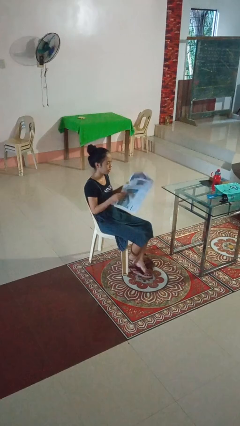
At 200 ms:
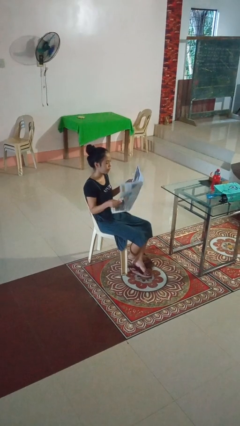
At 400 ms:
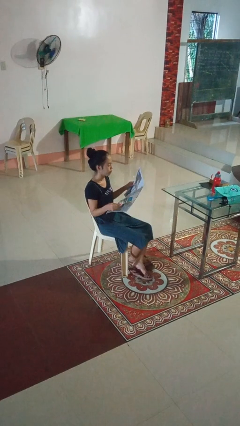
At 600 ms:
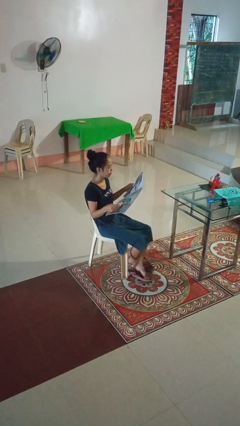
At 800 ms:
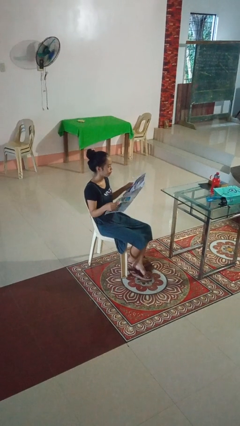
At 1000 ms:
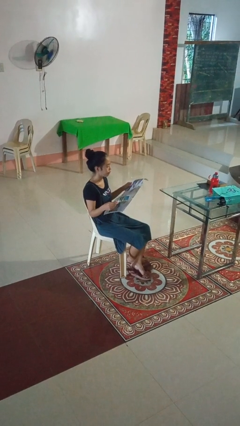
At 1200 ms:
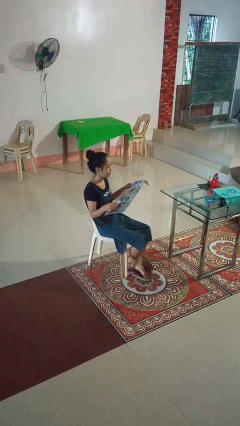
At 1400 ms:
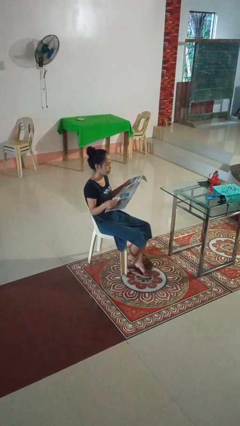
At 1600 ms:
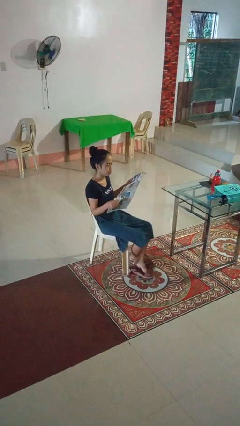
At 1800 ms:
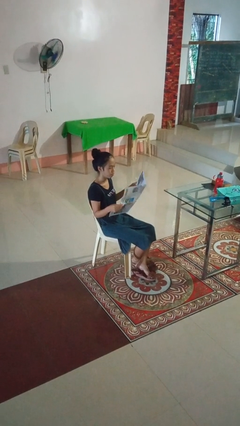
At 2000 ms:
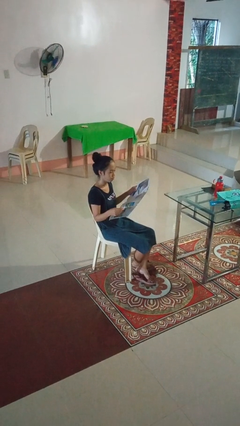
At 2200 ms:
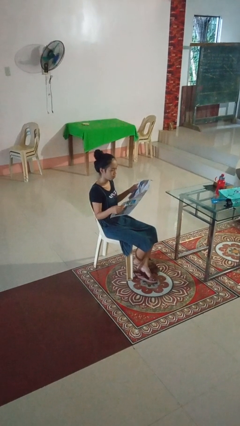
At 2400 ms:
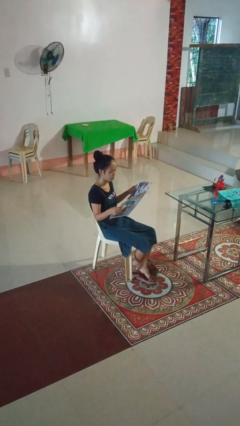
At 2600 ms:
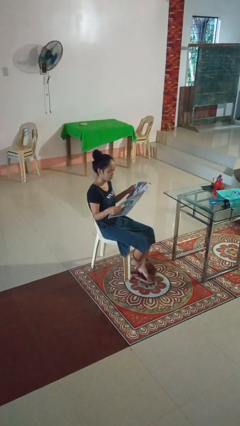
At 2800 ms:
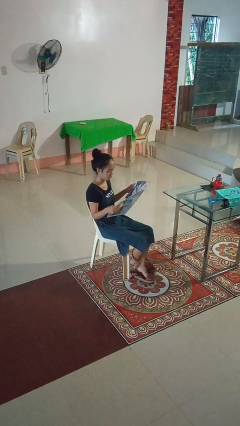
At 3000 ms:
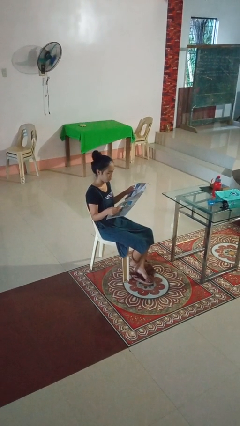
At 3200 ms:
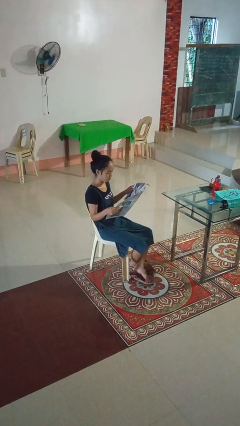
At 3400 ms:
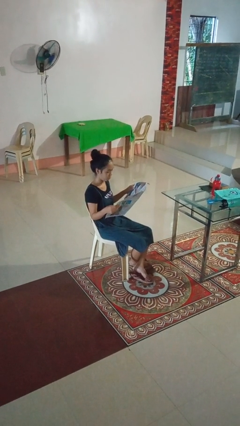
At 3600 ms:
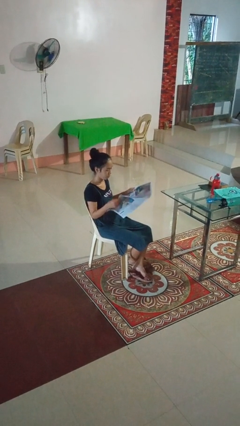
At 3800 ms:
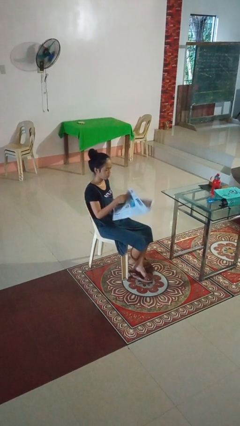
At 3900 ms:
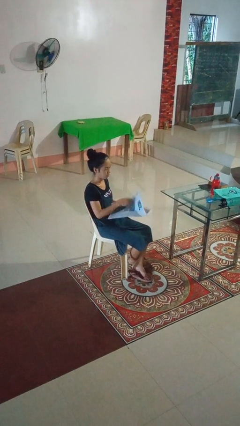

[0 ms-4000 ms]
person reads newspaper

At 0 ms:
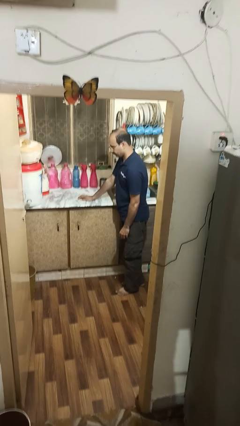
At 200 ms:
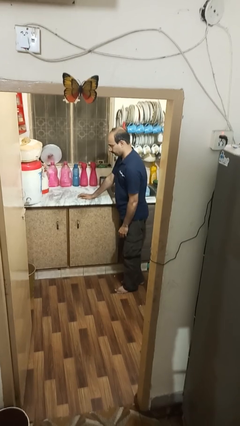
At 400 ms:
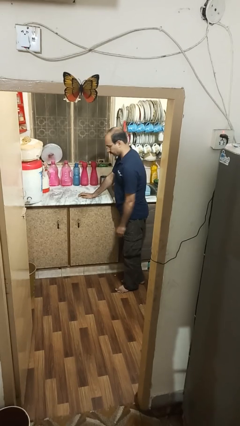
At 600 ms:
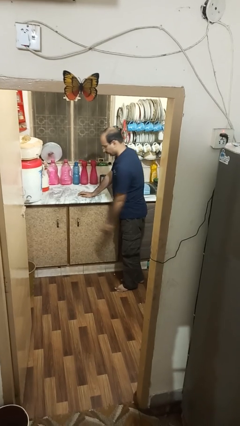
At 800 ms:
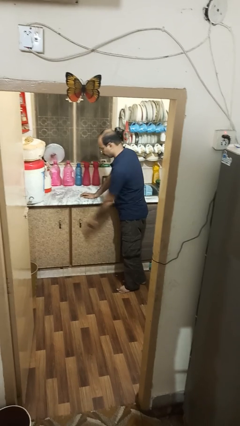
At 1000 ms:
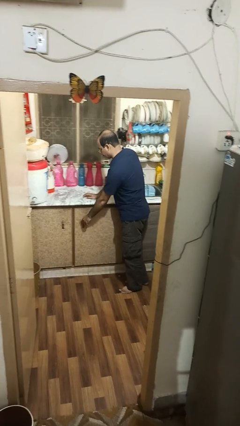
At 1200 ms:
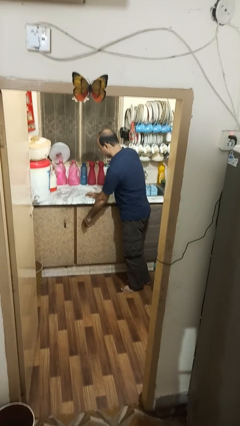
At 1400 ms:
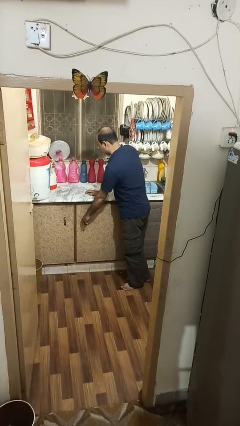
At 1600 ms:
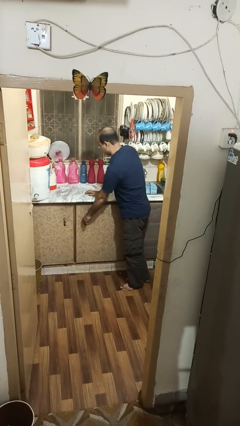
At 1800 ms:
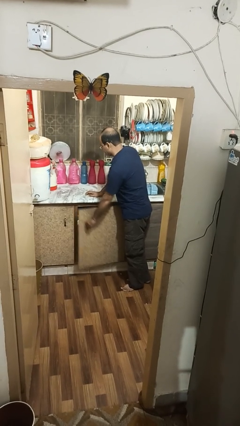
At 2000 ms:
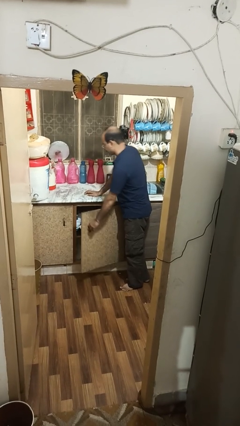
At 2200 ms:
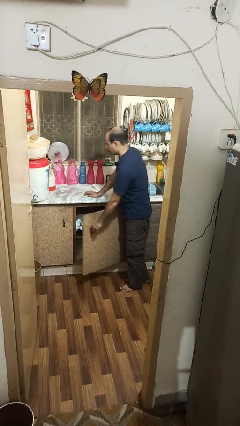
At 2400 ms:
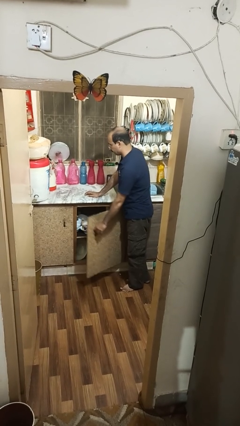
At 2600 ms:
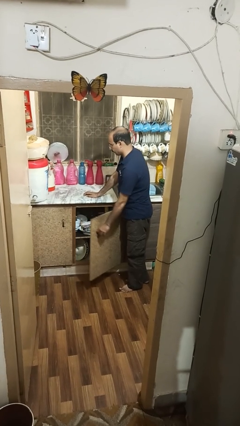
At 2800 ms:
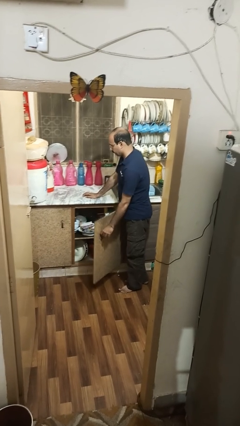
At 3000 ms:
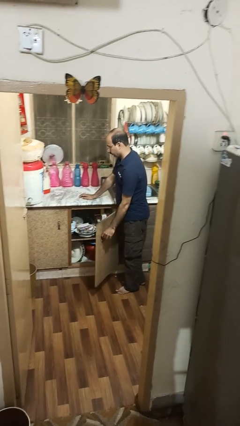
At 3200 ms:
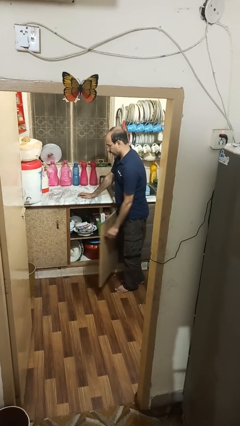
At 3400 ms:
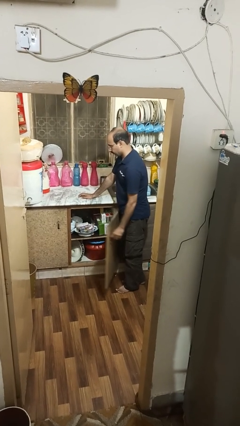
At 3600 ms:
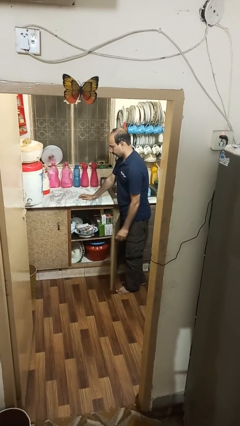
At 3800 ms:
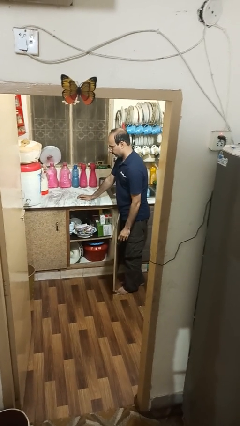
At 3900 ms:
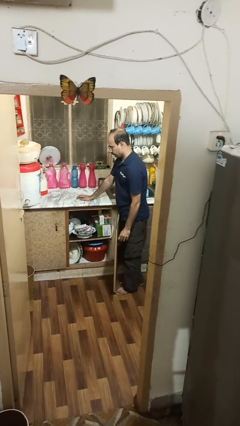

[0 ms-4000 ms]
person opens cabinet

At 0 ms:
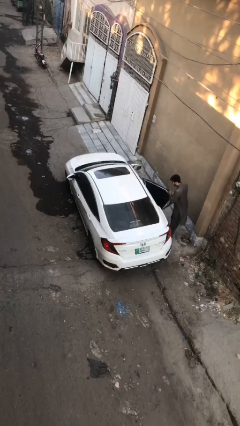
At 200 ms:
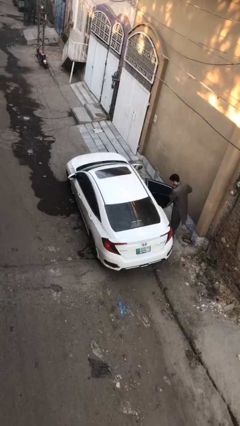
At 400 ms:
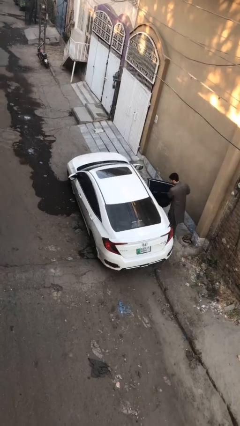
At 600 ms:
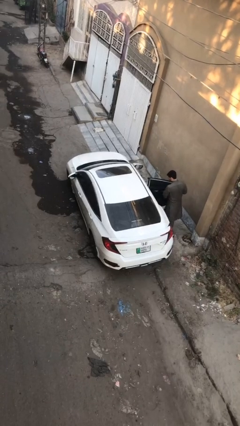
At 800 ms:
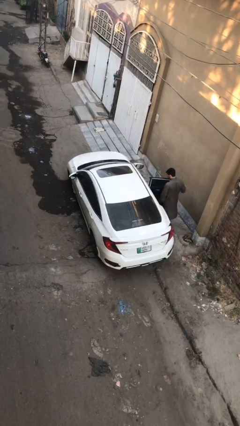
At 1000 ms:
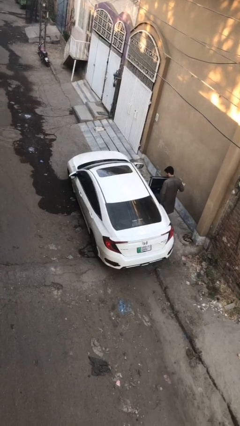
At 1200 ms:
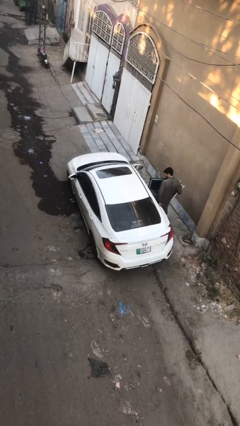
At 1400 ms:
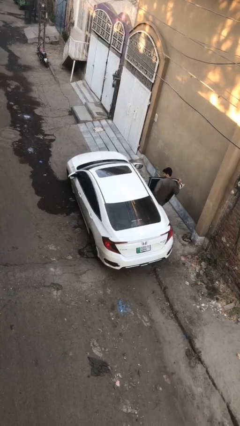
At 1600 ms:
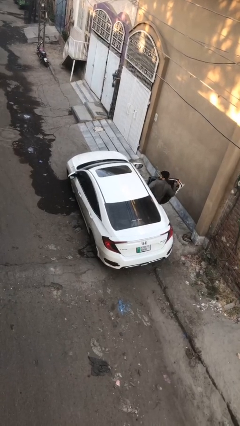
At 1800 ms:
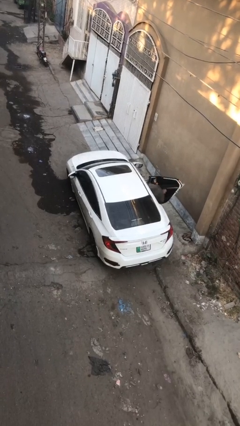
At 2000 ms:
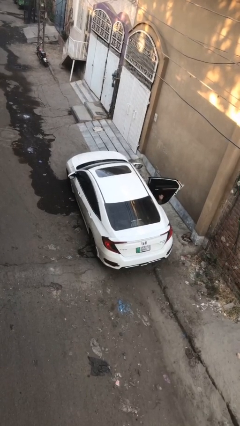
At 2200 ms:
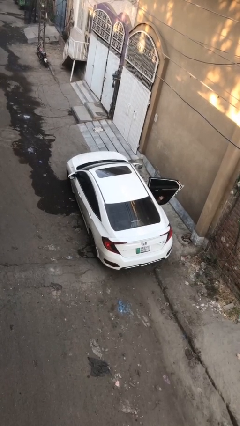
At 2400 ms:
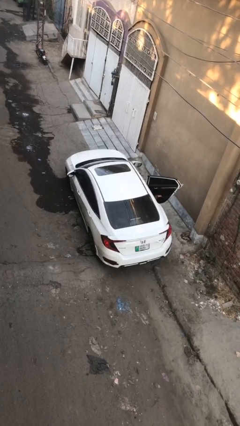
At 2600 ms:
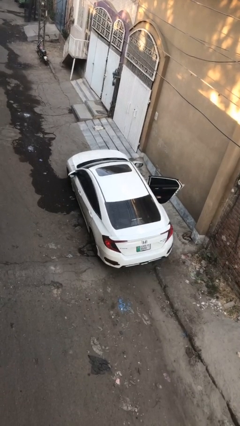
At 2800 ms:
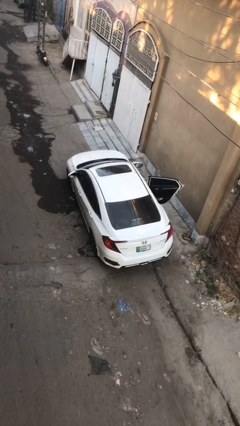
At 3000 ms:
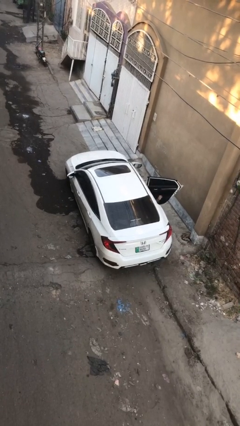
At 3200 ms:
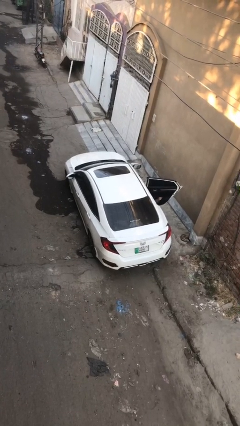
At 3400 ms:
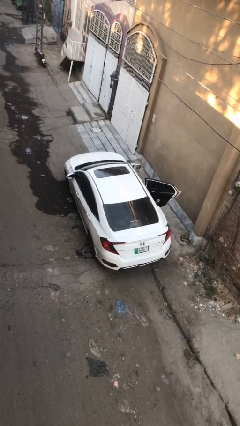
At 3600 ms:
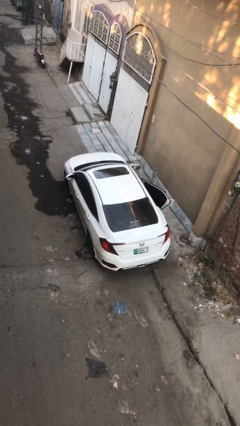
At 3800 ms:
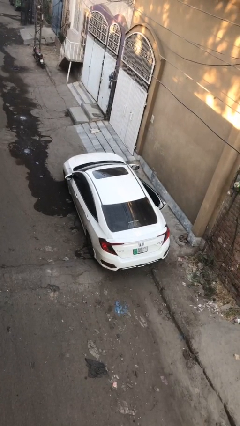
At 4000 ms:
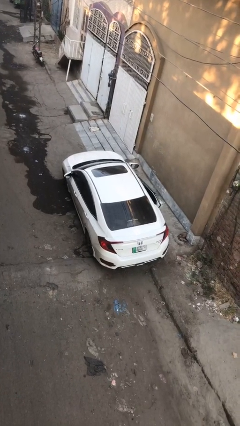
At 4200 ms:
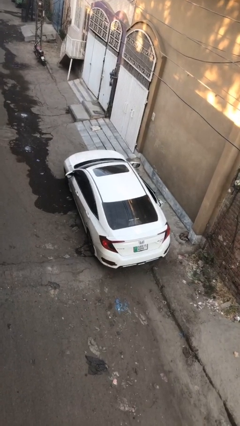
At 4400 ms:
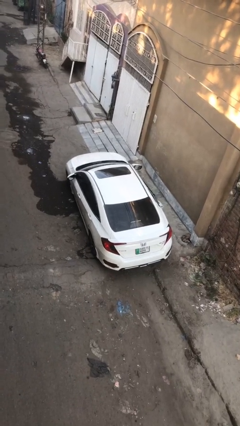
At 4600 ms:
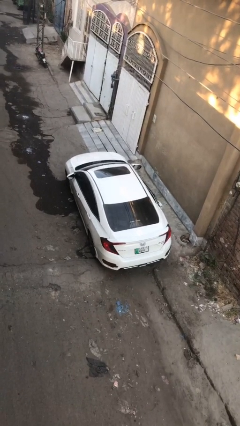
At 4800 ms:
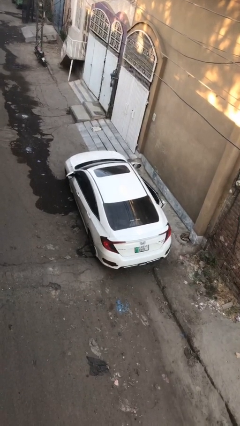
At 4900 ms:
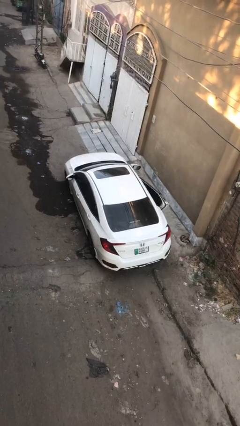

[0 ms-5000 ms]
car picks up person

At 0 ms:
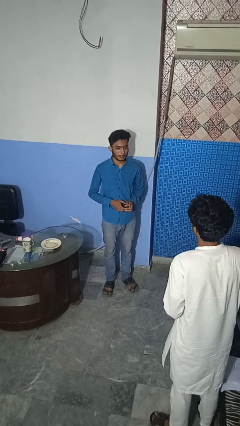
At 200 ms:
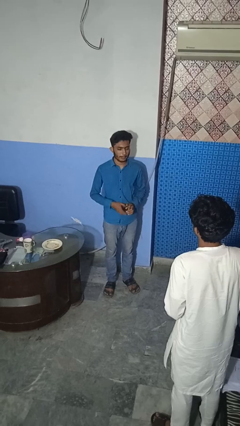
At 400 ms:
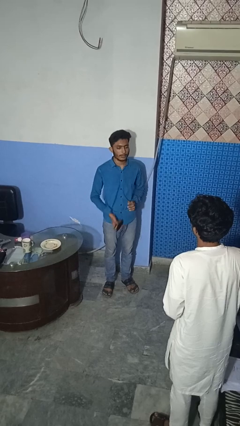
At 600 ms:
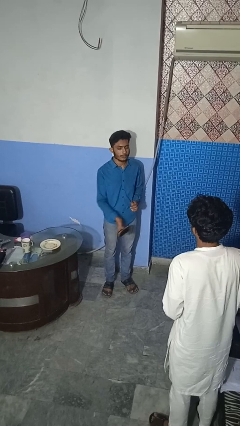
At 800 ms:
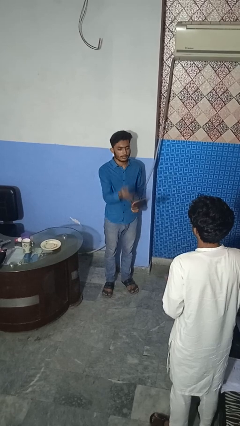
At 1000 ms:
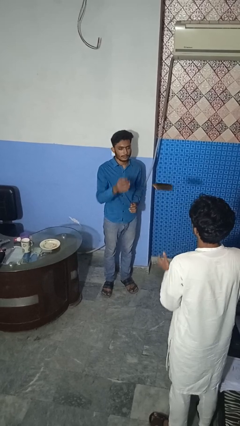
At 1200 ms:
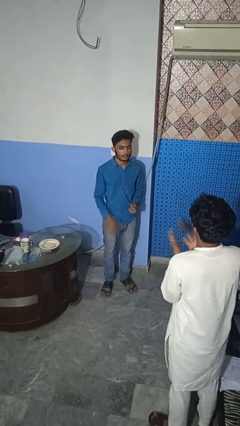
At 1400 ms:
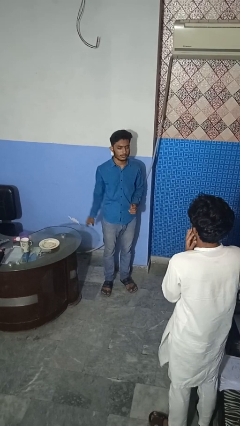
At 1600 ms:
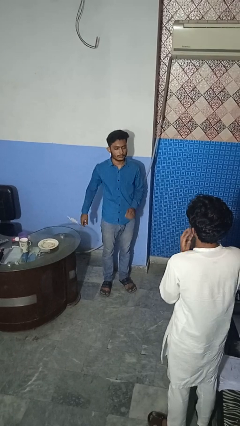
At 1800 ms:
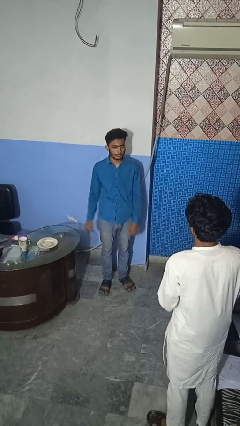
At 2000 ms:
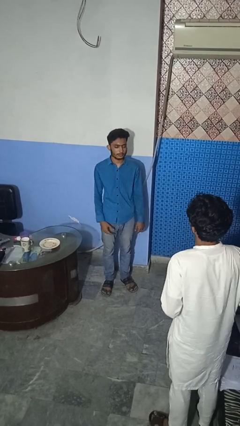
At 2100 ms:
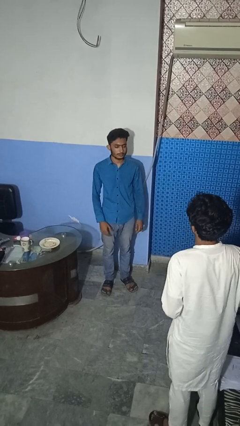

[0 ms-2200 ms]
person throws object to person

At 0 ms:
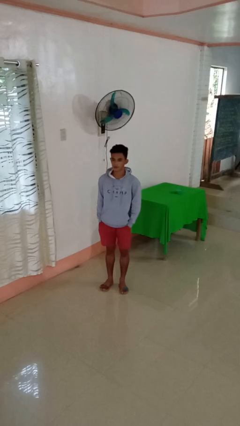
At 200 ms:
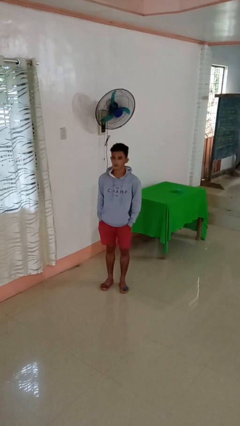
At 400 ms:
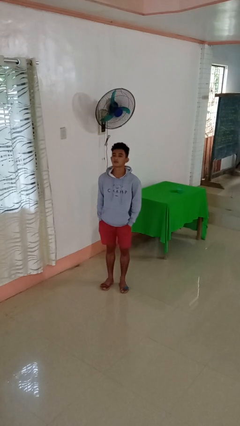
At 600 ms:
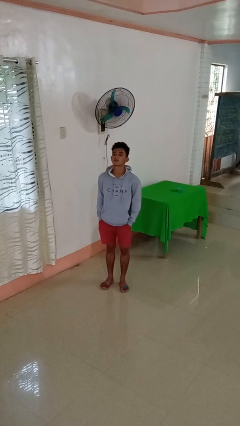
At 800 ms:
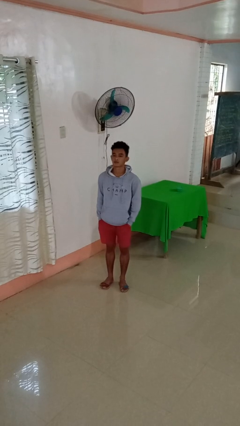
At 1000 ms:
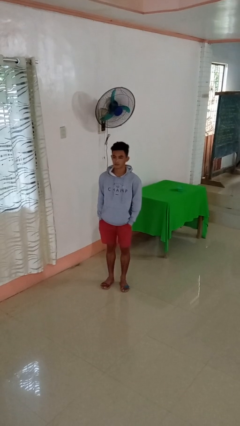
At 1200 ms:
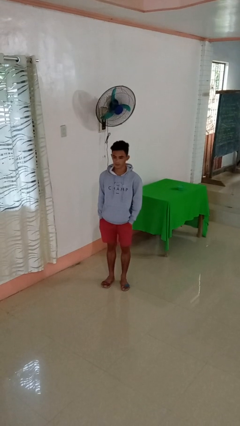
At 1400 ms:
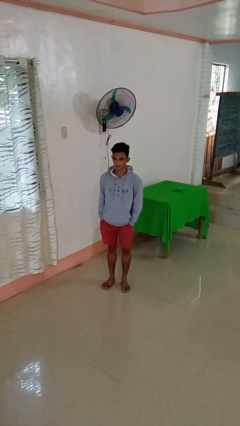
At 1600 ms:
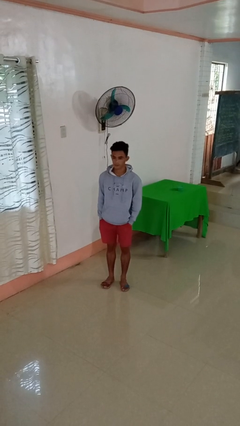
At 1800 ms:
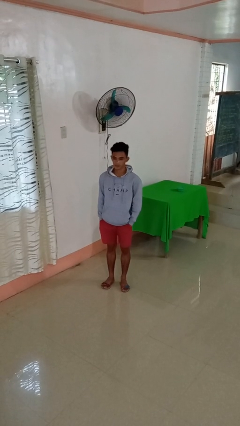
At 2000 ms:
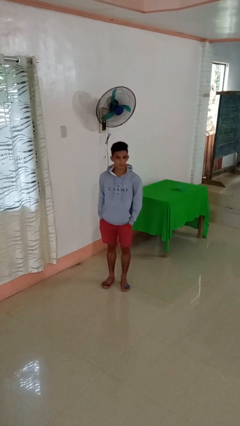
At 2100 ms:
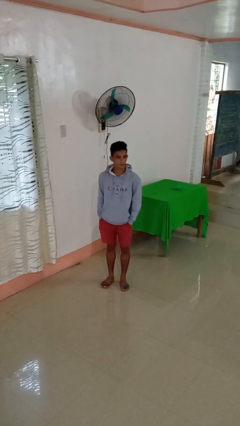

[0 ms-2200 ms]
person nods head
